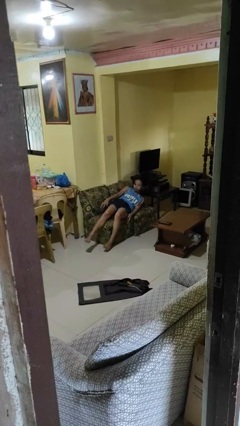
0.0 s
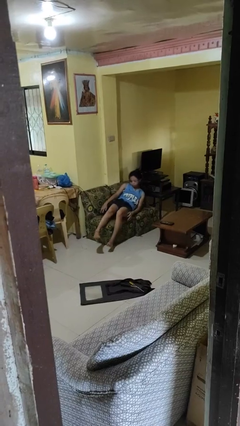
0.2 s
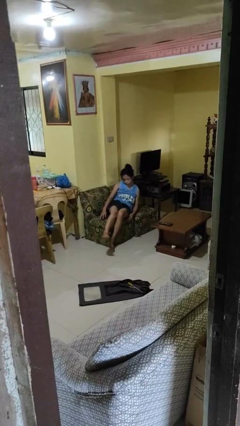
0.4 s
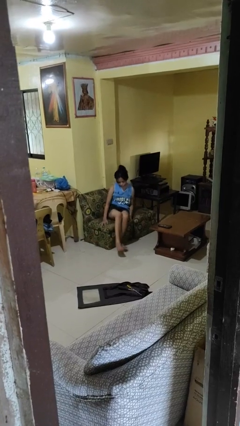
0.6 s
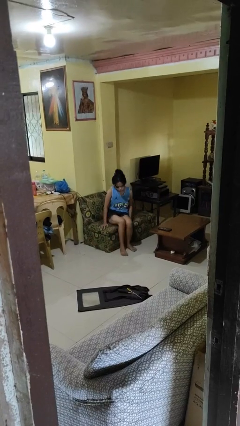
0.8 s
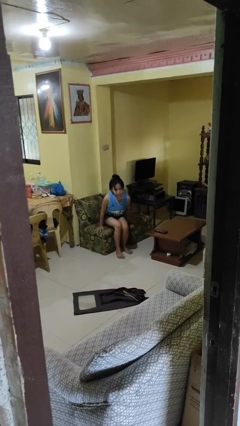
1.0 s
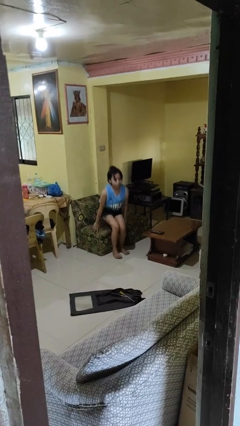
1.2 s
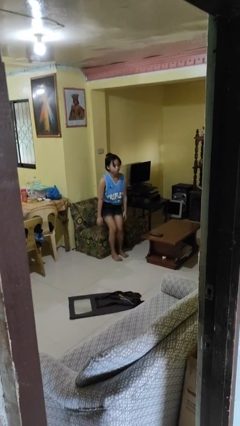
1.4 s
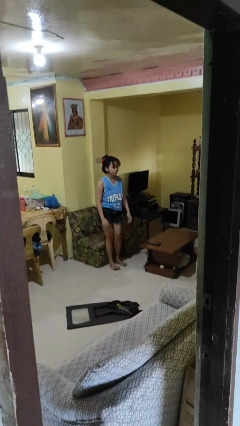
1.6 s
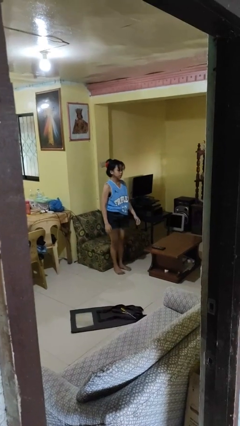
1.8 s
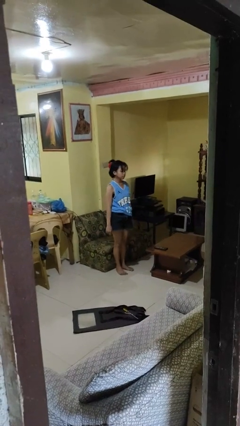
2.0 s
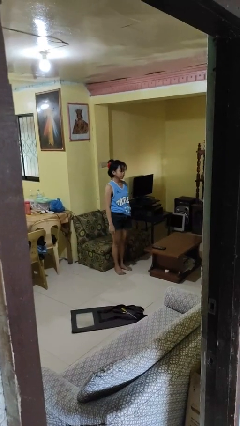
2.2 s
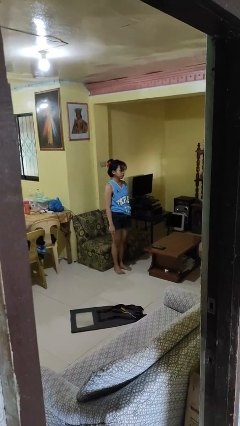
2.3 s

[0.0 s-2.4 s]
person stands up

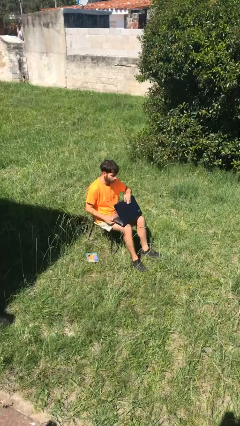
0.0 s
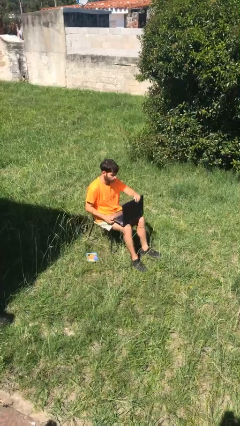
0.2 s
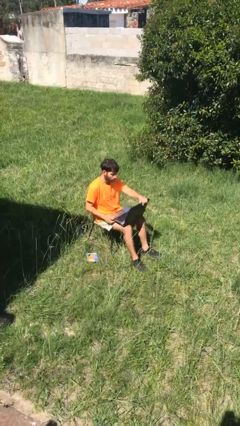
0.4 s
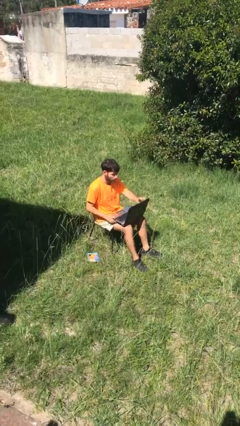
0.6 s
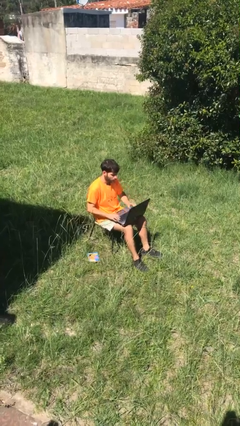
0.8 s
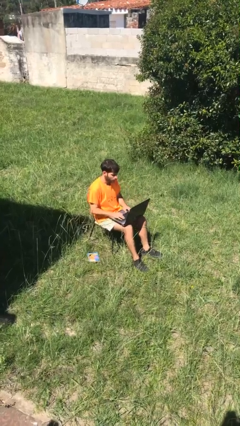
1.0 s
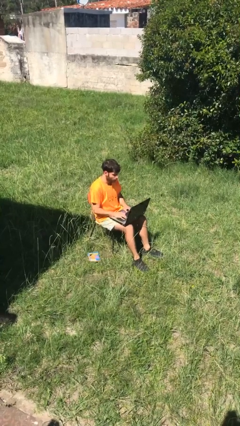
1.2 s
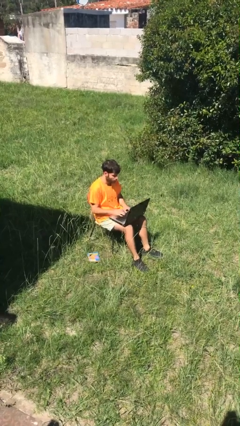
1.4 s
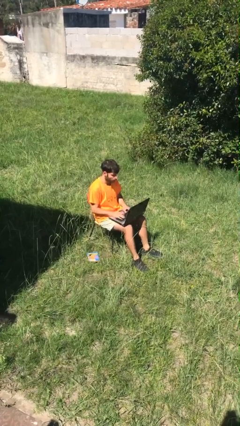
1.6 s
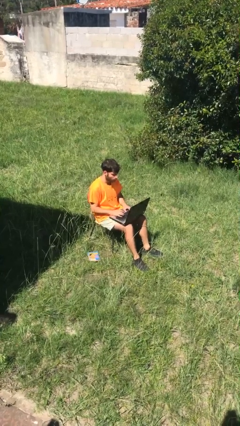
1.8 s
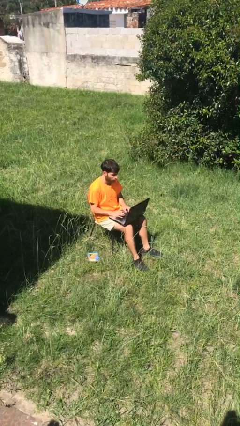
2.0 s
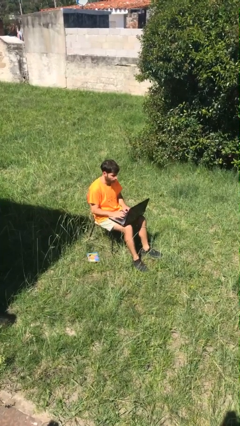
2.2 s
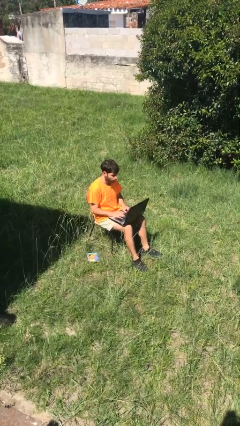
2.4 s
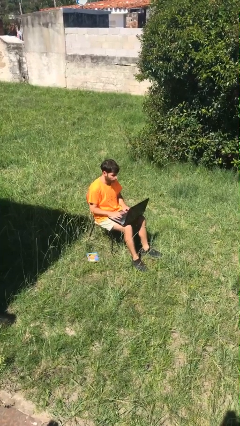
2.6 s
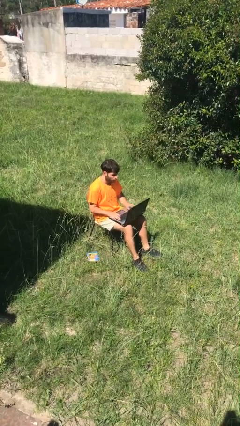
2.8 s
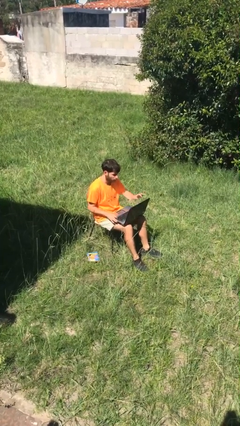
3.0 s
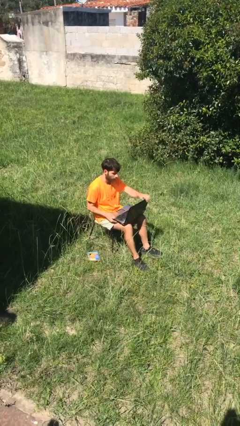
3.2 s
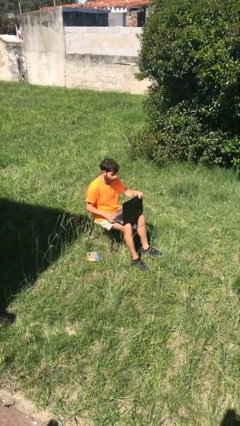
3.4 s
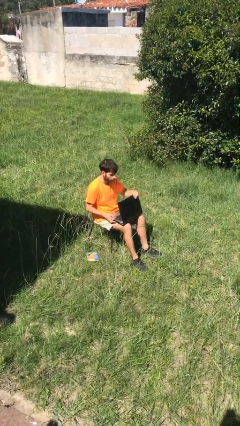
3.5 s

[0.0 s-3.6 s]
person interacts with laptop

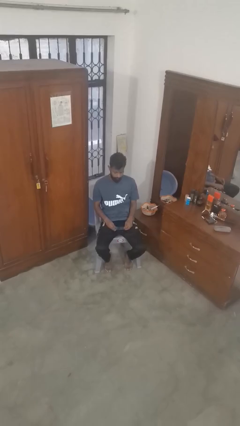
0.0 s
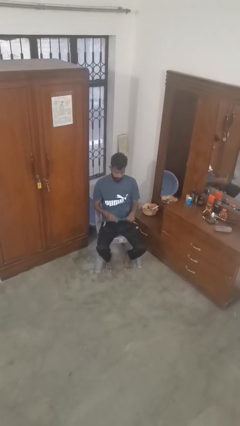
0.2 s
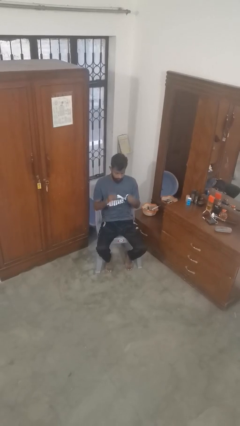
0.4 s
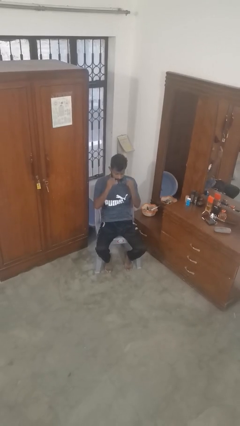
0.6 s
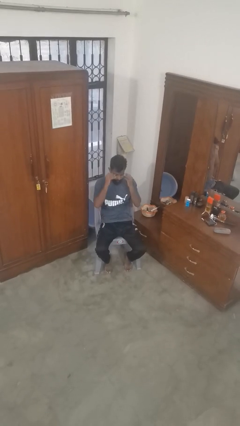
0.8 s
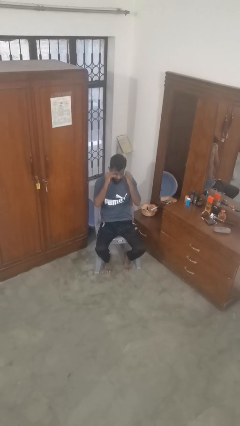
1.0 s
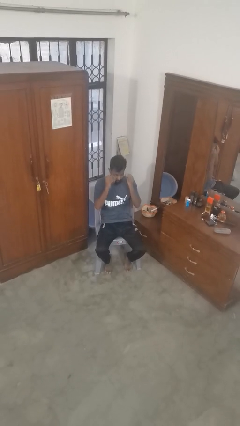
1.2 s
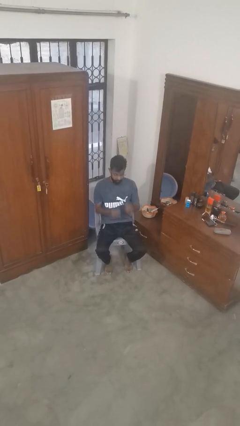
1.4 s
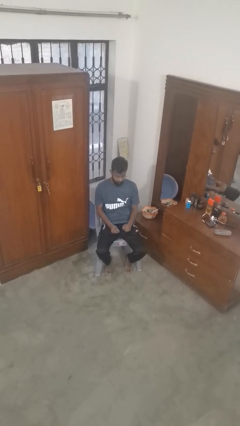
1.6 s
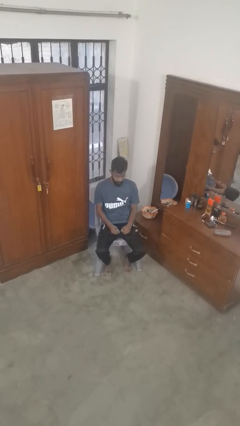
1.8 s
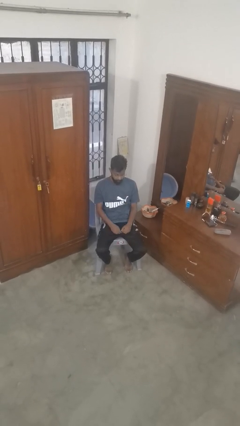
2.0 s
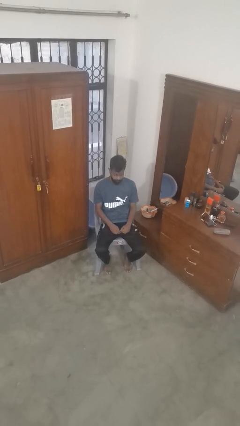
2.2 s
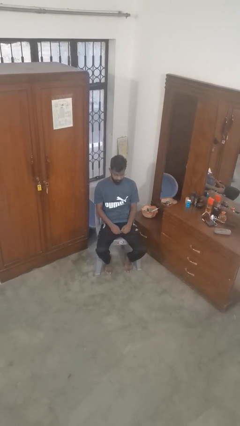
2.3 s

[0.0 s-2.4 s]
person puts on glasses

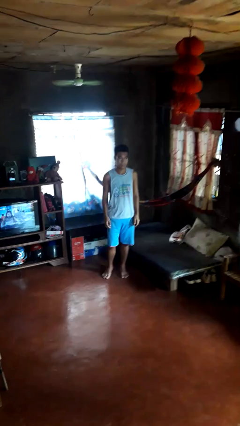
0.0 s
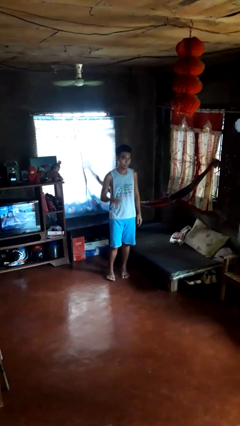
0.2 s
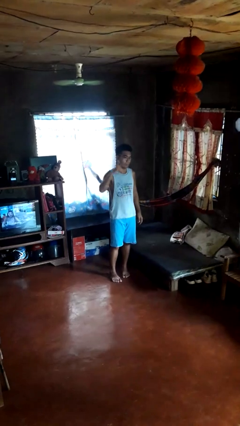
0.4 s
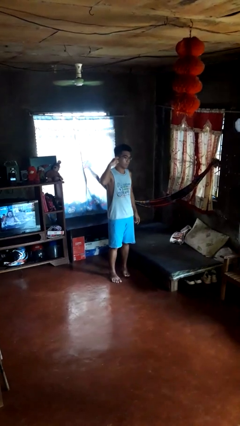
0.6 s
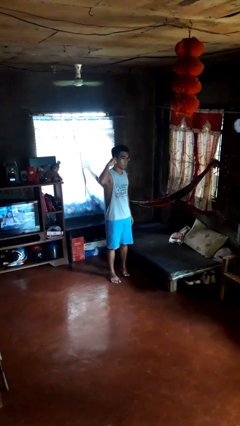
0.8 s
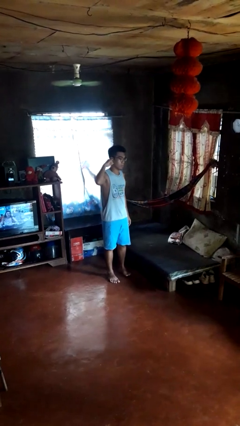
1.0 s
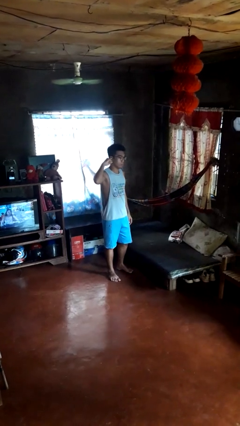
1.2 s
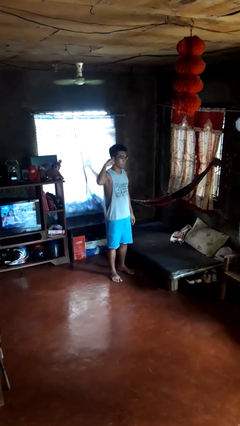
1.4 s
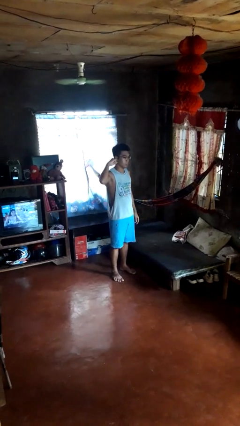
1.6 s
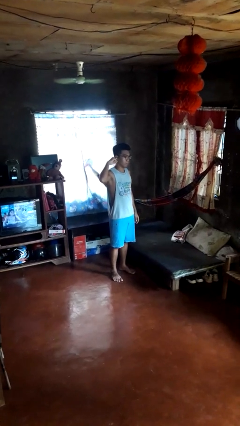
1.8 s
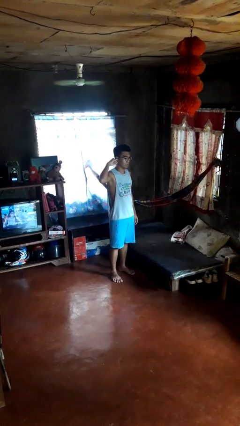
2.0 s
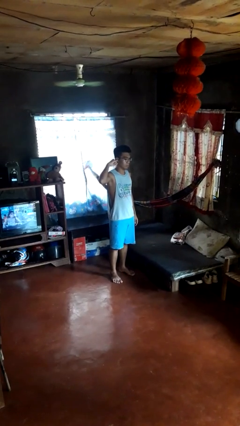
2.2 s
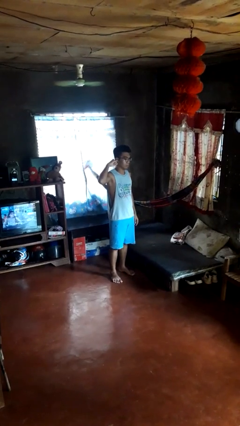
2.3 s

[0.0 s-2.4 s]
person gestures listen closely

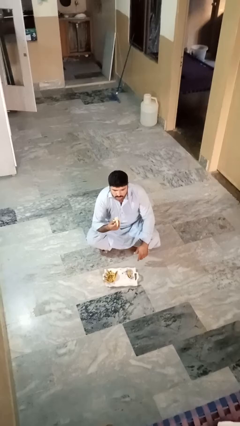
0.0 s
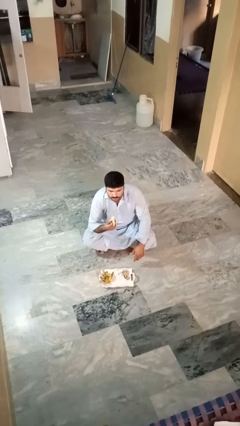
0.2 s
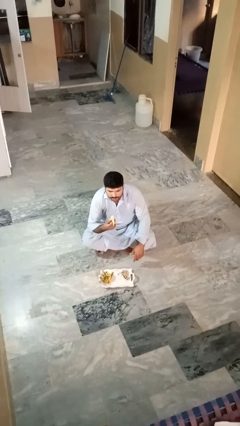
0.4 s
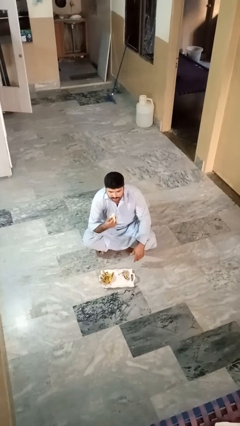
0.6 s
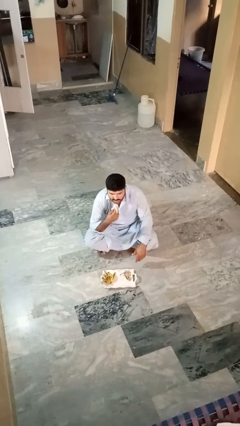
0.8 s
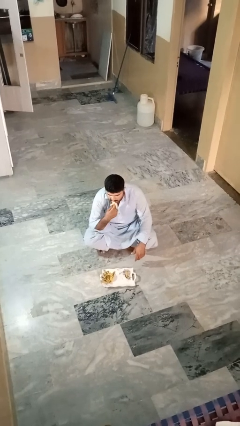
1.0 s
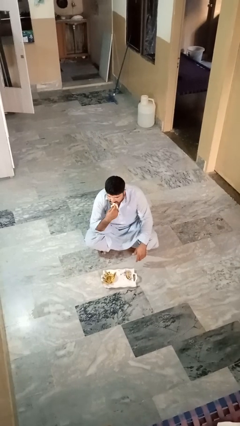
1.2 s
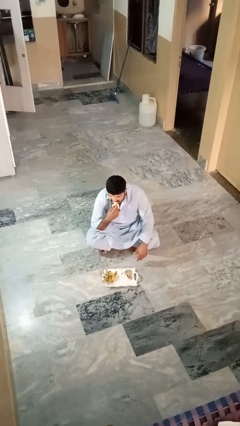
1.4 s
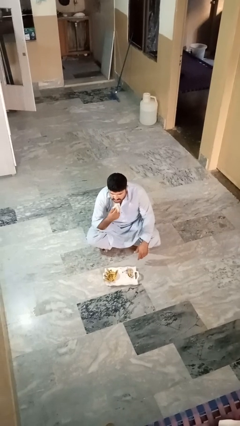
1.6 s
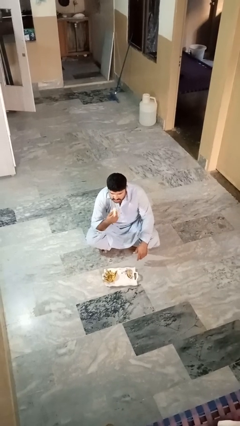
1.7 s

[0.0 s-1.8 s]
person eats banana

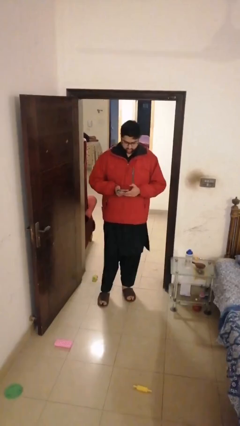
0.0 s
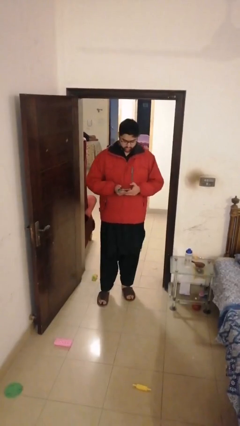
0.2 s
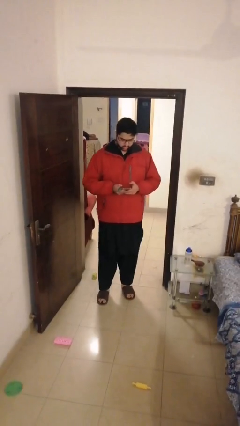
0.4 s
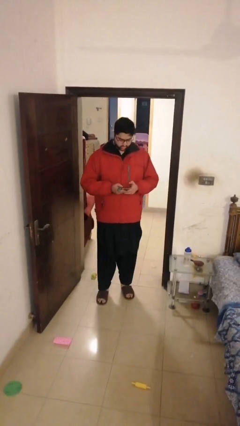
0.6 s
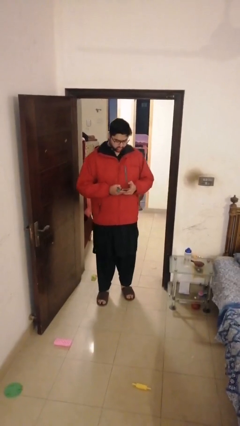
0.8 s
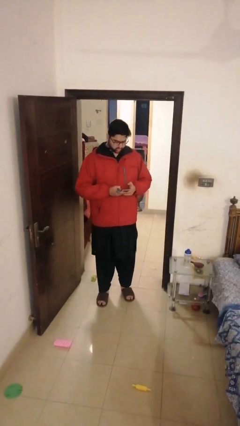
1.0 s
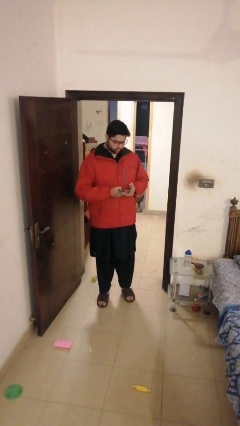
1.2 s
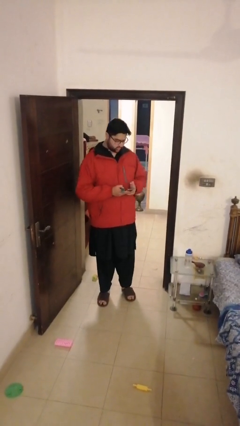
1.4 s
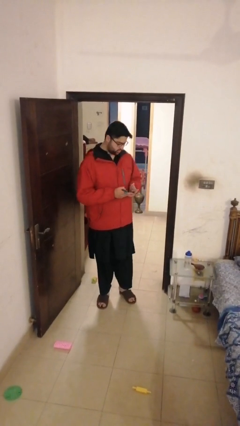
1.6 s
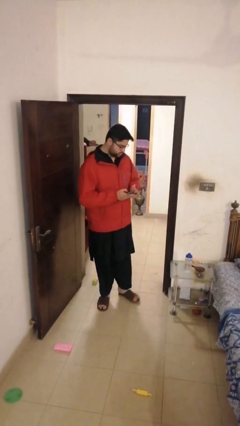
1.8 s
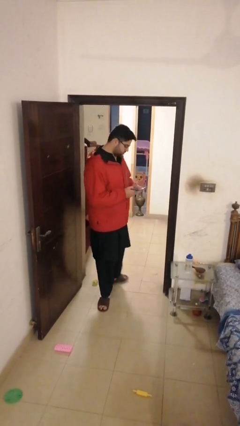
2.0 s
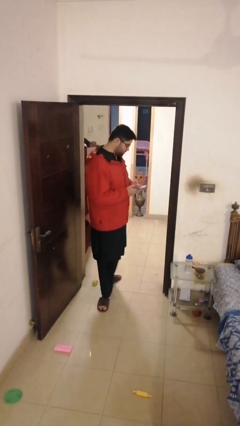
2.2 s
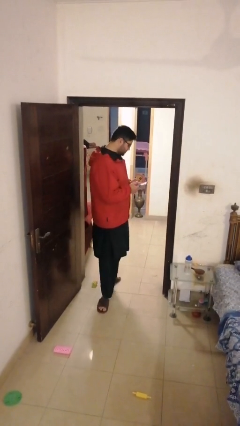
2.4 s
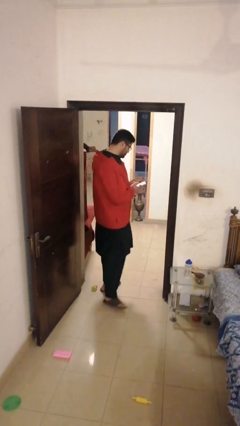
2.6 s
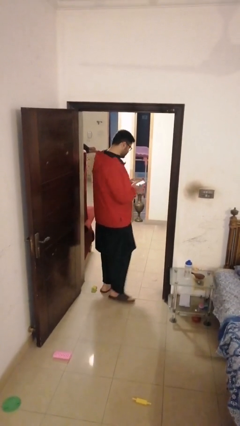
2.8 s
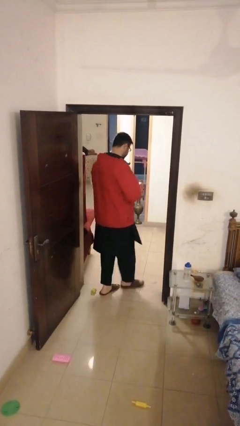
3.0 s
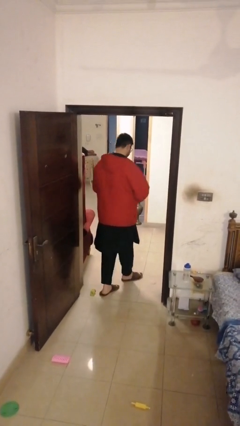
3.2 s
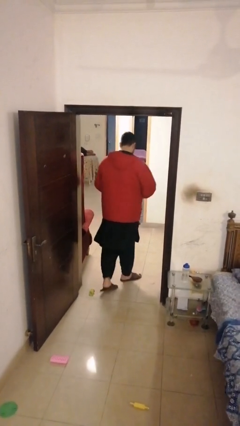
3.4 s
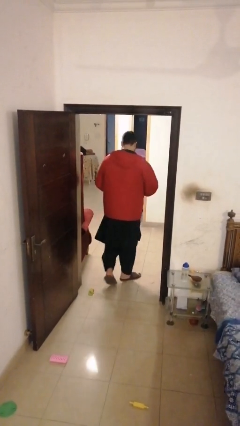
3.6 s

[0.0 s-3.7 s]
person enters scene through structure

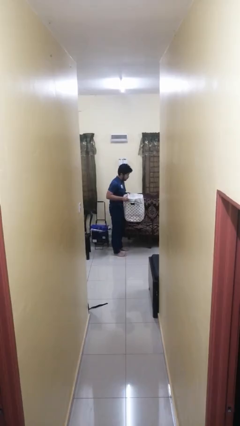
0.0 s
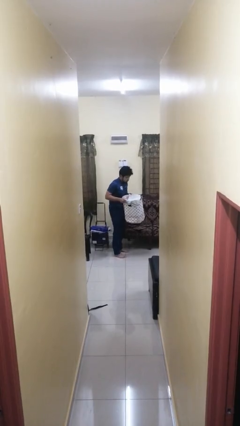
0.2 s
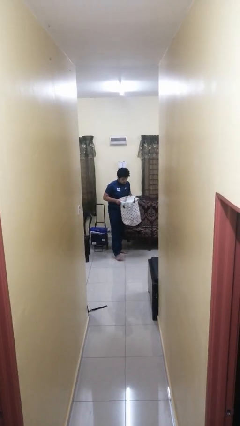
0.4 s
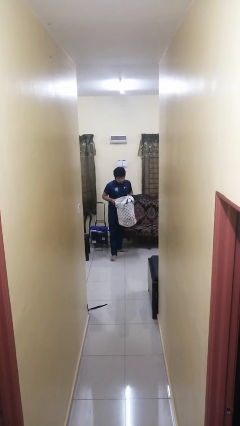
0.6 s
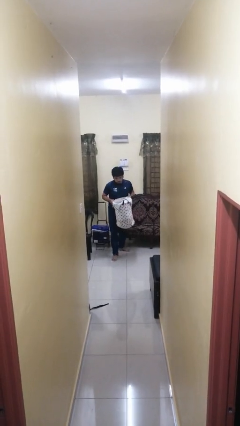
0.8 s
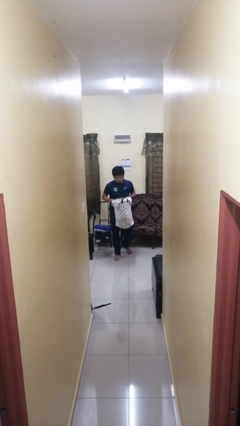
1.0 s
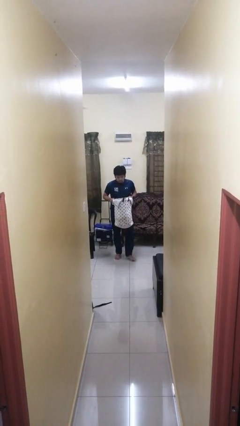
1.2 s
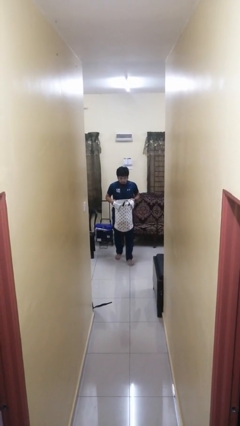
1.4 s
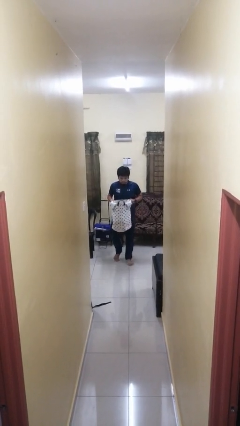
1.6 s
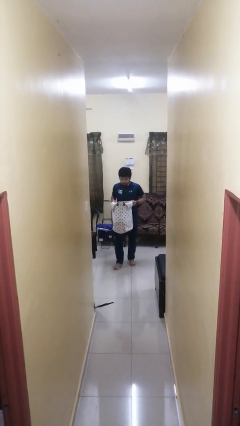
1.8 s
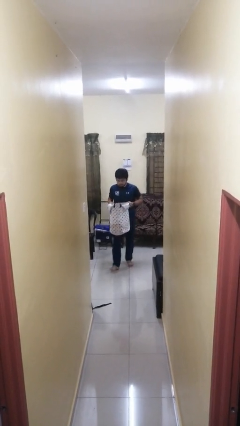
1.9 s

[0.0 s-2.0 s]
person carries laundry basket
